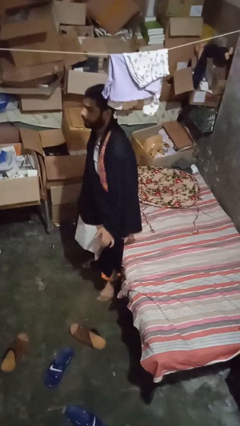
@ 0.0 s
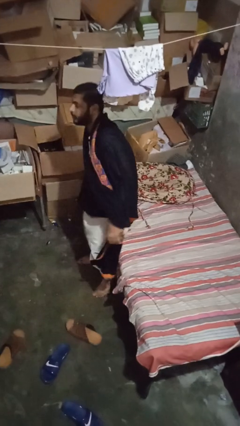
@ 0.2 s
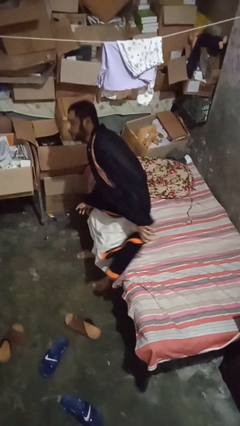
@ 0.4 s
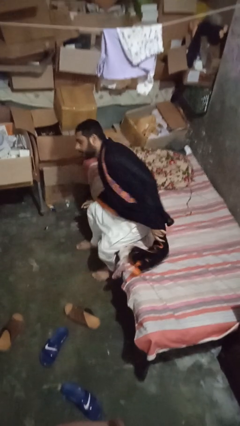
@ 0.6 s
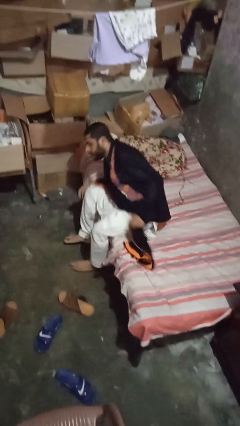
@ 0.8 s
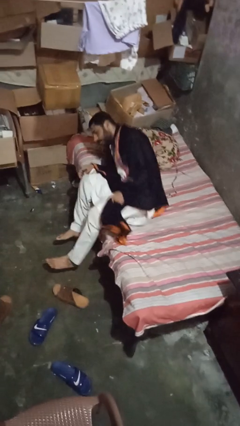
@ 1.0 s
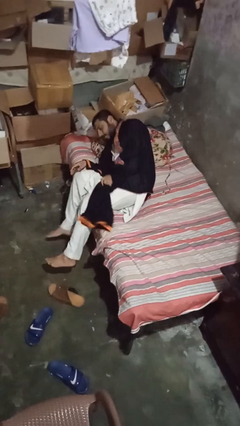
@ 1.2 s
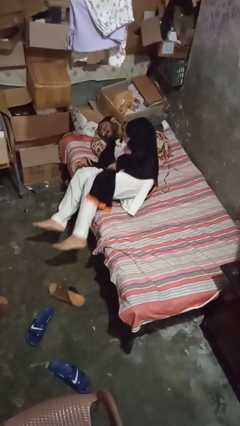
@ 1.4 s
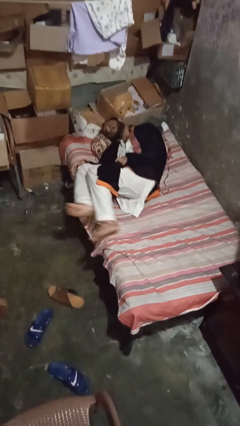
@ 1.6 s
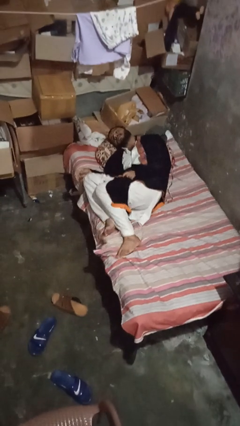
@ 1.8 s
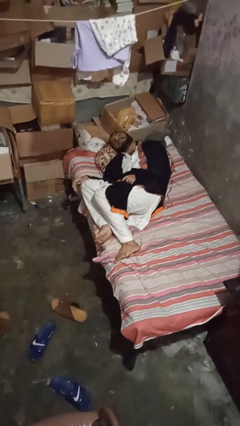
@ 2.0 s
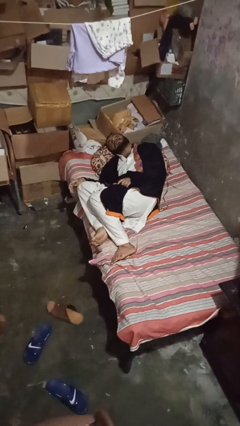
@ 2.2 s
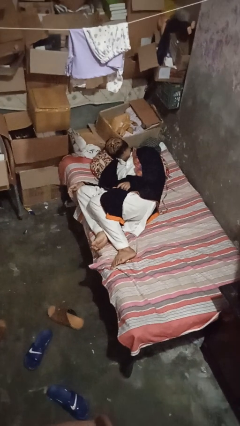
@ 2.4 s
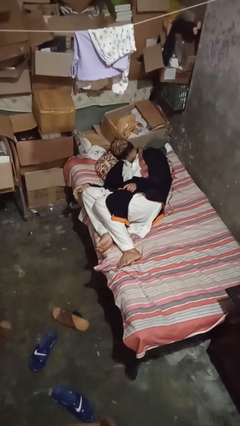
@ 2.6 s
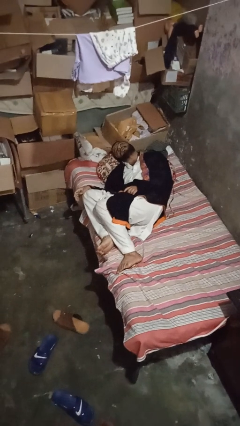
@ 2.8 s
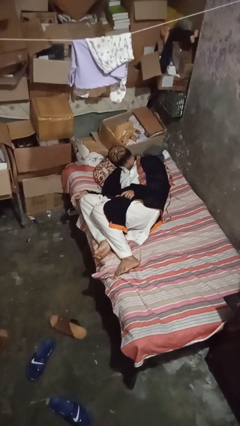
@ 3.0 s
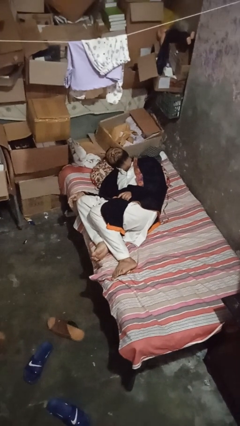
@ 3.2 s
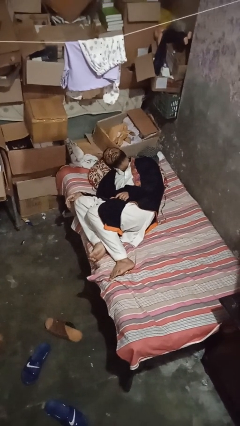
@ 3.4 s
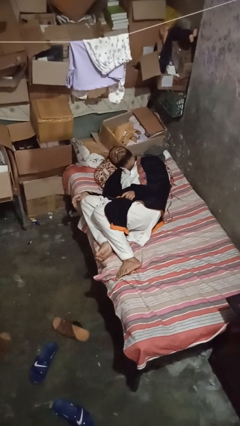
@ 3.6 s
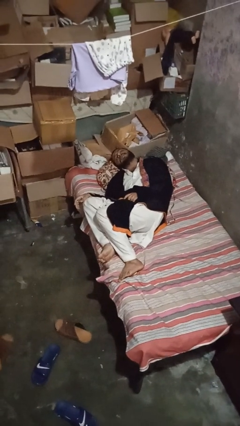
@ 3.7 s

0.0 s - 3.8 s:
person lies down on bed

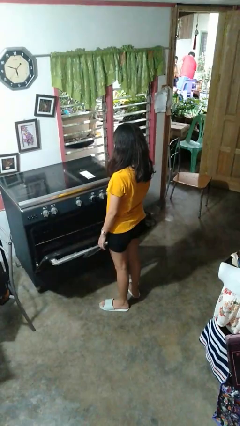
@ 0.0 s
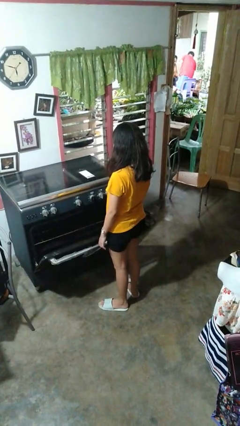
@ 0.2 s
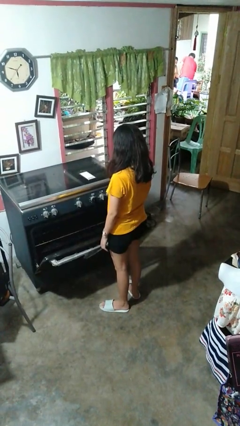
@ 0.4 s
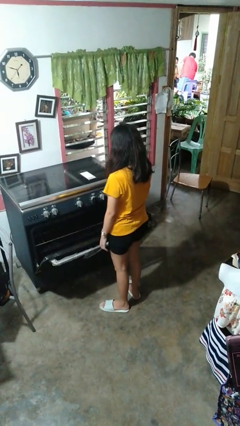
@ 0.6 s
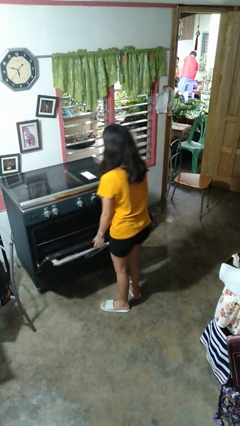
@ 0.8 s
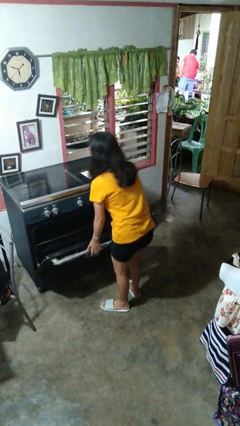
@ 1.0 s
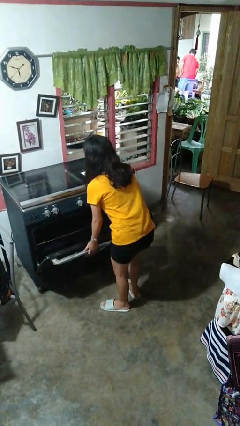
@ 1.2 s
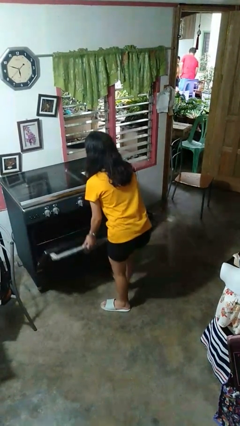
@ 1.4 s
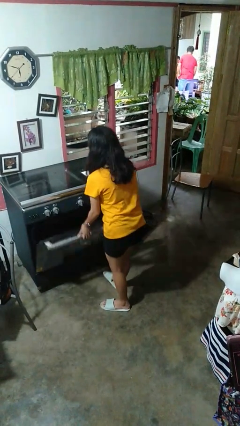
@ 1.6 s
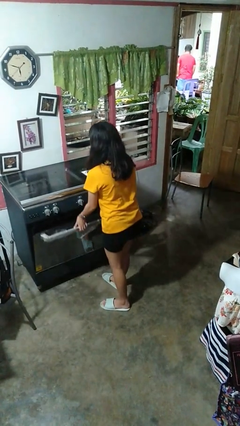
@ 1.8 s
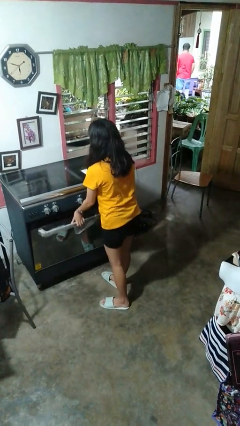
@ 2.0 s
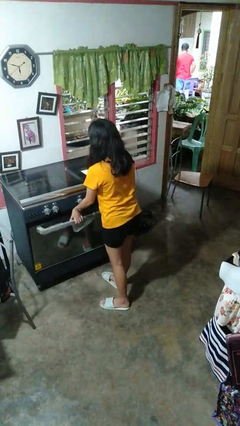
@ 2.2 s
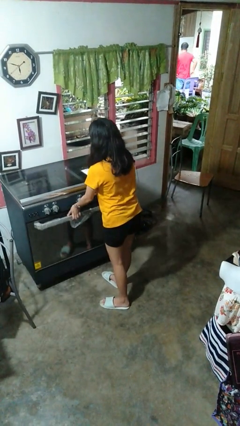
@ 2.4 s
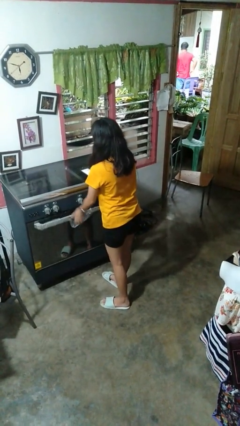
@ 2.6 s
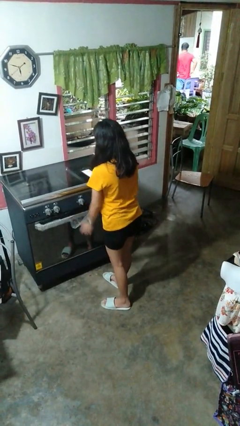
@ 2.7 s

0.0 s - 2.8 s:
person closes oven door

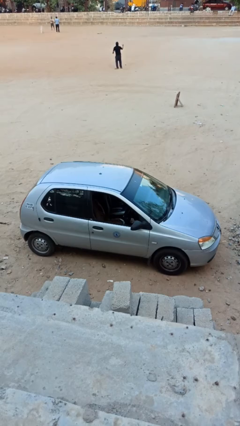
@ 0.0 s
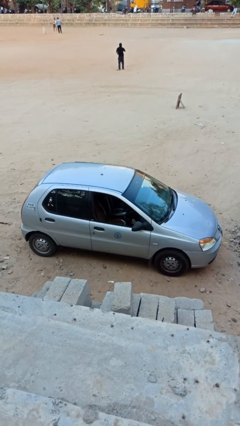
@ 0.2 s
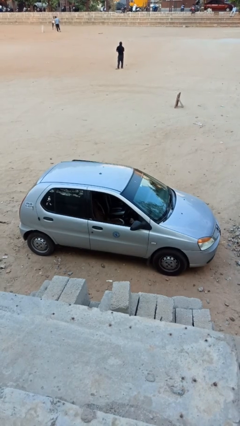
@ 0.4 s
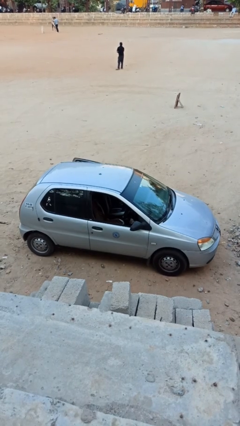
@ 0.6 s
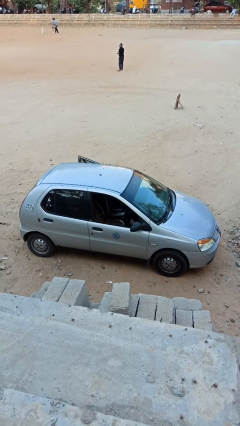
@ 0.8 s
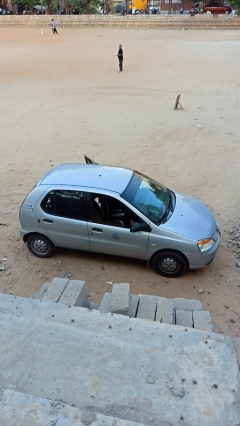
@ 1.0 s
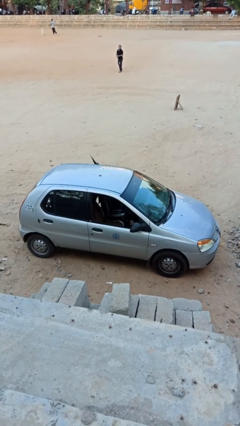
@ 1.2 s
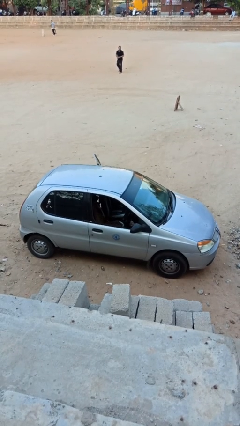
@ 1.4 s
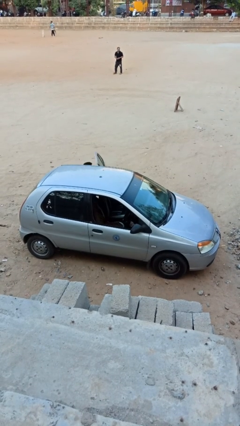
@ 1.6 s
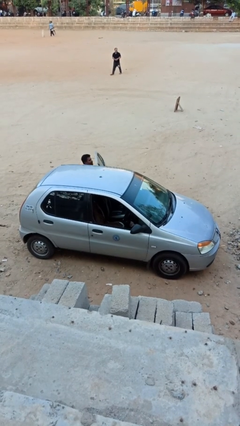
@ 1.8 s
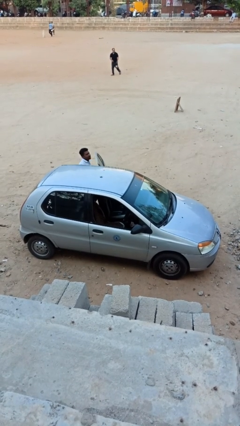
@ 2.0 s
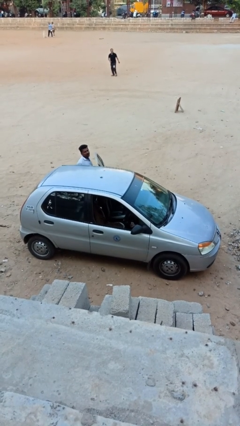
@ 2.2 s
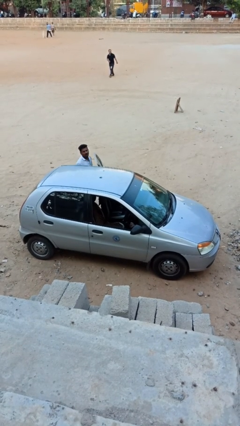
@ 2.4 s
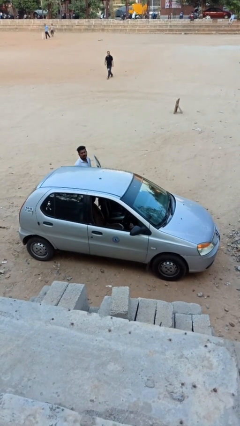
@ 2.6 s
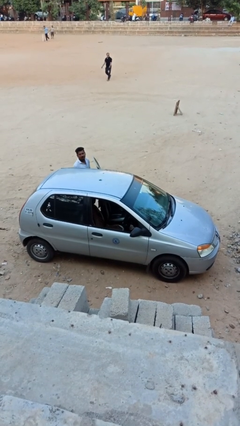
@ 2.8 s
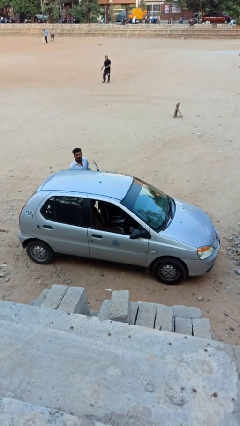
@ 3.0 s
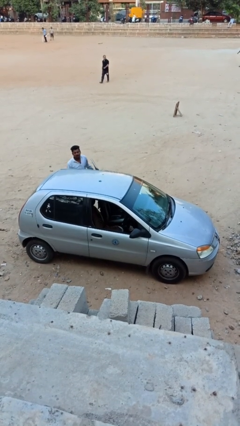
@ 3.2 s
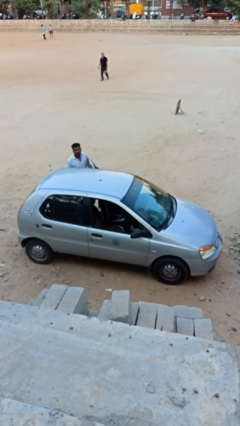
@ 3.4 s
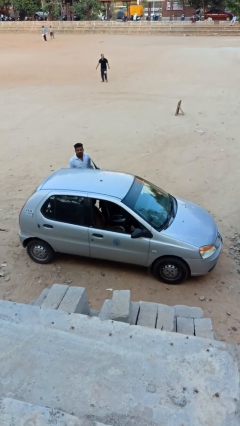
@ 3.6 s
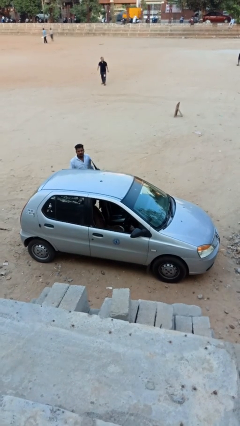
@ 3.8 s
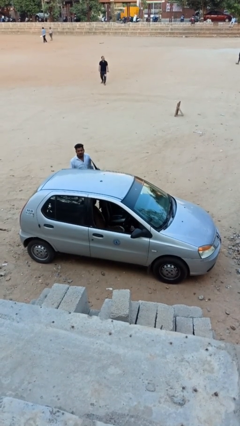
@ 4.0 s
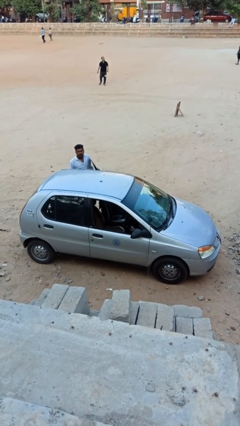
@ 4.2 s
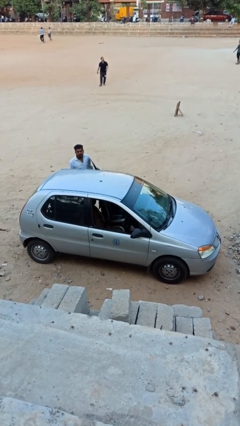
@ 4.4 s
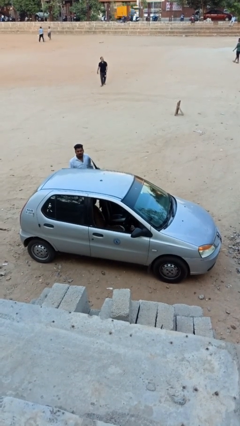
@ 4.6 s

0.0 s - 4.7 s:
car drops off person

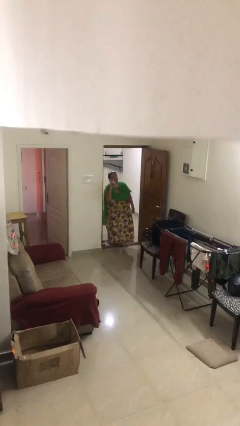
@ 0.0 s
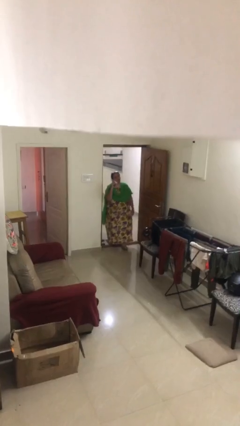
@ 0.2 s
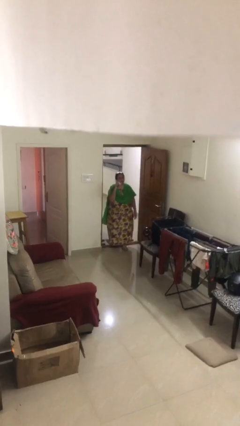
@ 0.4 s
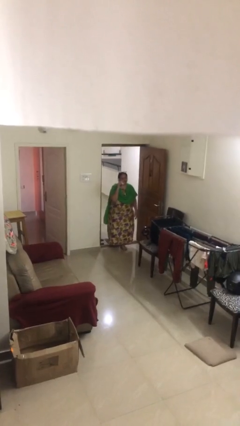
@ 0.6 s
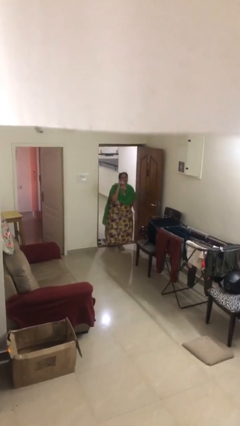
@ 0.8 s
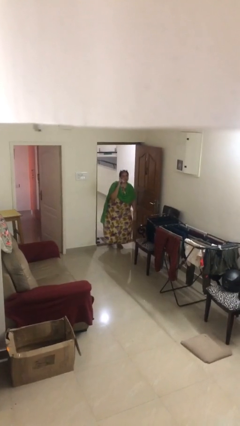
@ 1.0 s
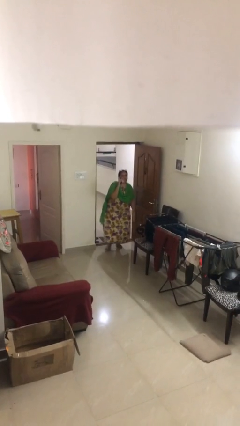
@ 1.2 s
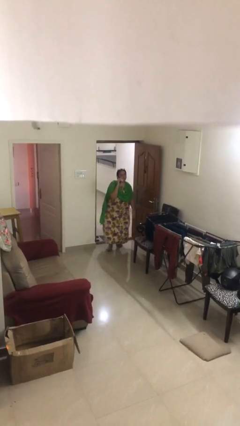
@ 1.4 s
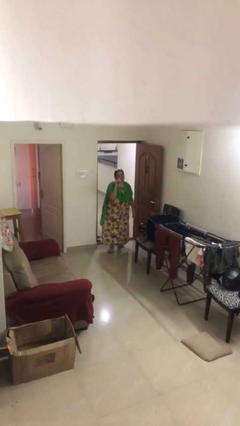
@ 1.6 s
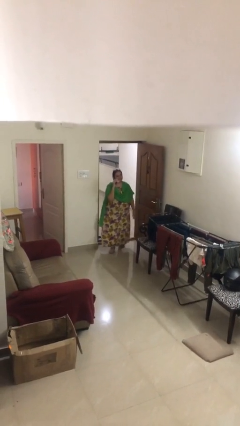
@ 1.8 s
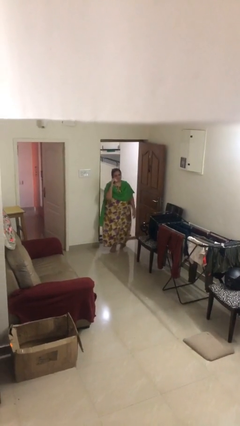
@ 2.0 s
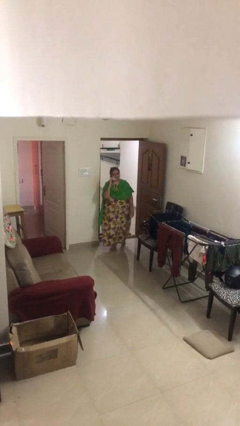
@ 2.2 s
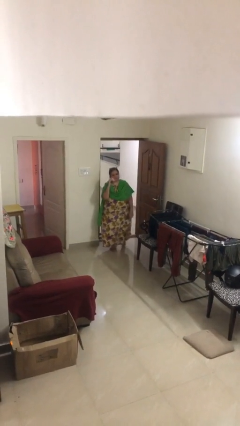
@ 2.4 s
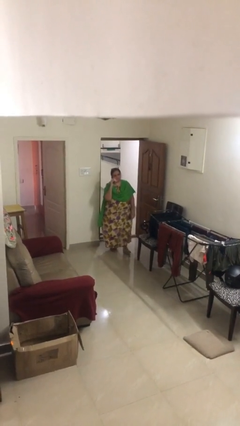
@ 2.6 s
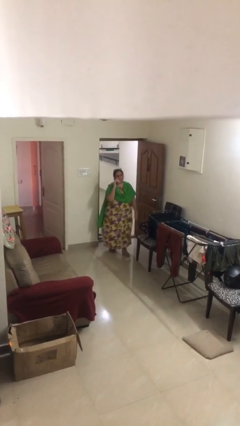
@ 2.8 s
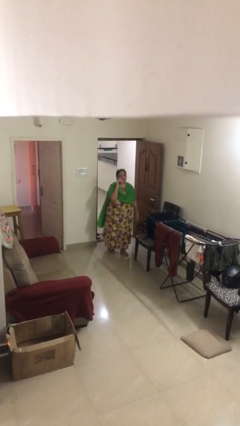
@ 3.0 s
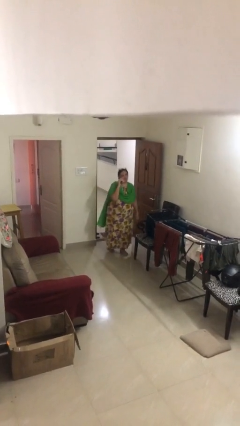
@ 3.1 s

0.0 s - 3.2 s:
person enters scene through structure

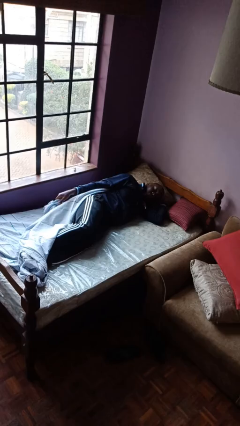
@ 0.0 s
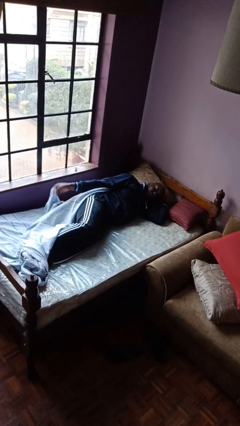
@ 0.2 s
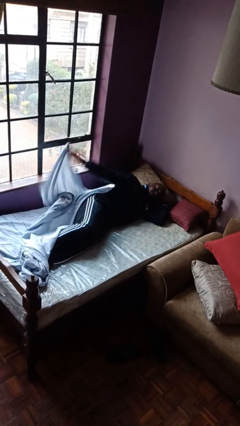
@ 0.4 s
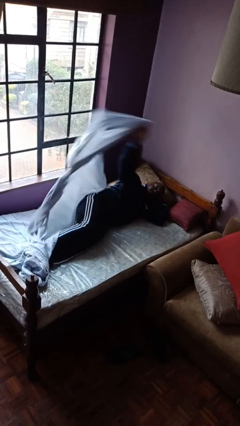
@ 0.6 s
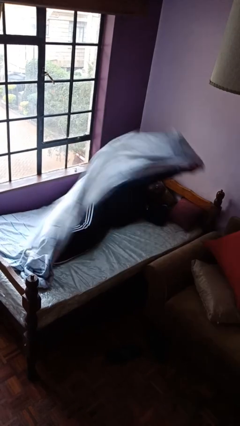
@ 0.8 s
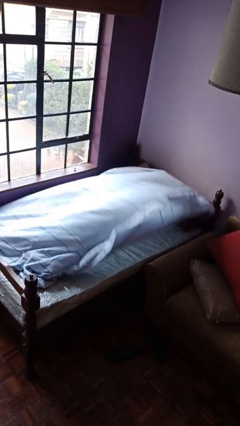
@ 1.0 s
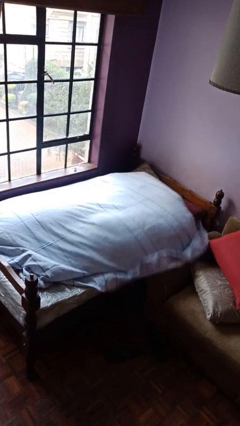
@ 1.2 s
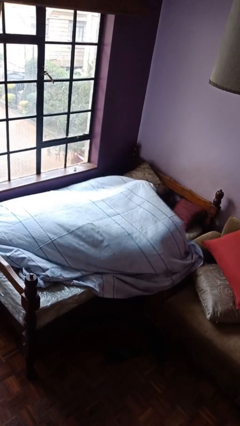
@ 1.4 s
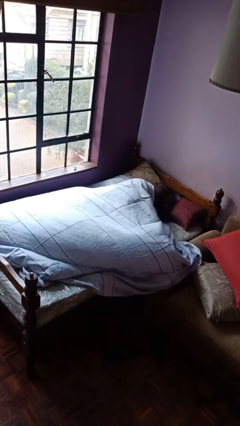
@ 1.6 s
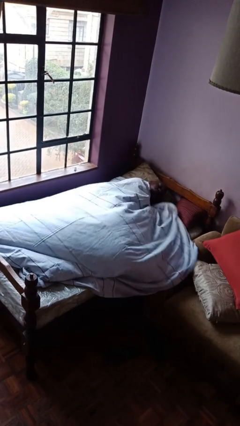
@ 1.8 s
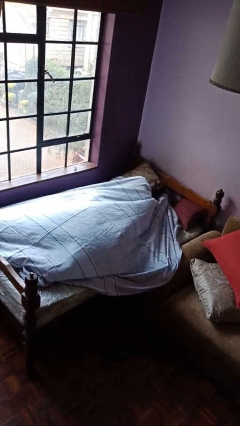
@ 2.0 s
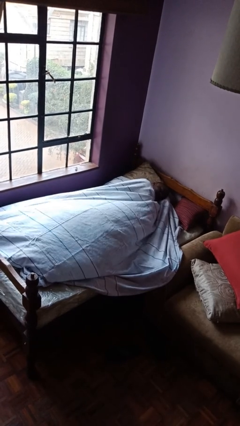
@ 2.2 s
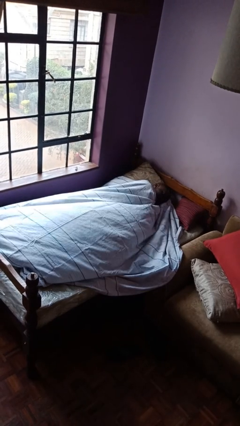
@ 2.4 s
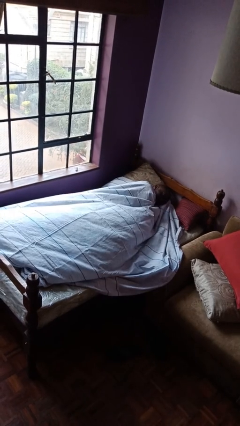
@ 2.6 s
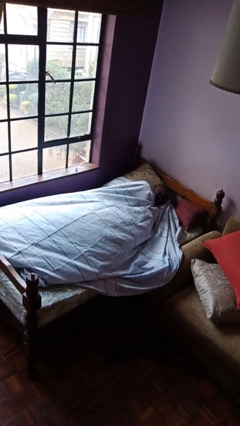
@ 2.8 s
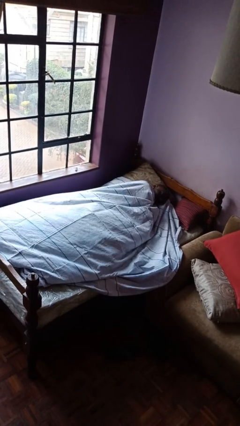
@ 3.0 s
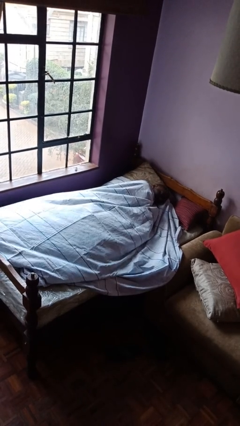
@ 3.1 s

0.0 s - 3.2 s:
person covers with bedsheets
